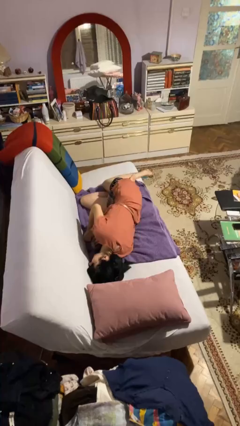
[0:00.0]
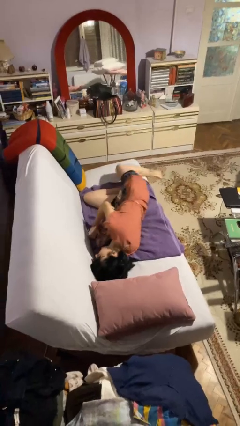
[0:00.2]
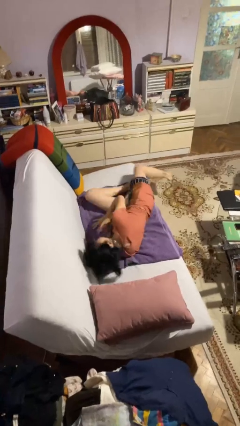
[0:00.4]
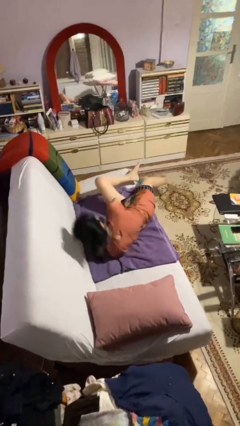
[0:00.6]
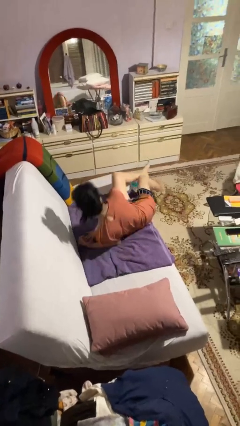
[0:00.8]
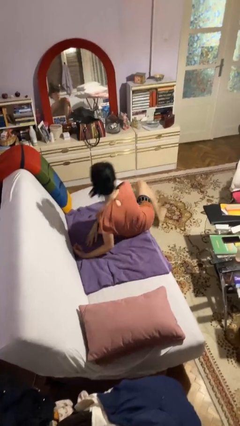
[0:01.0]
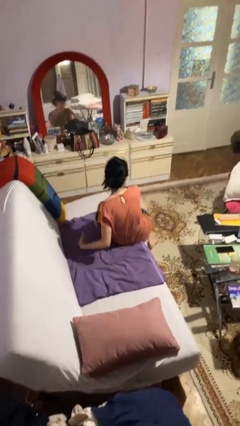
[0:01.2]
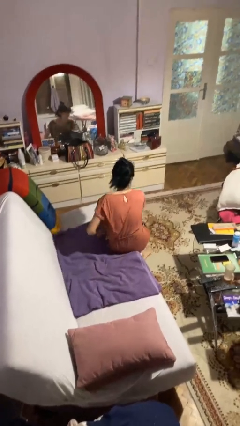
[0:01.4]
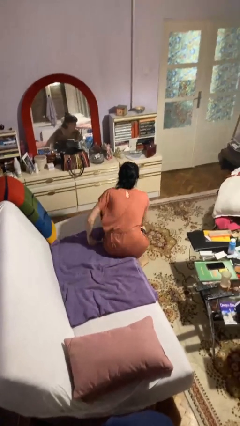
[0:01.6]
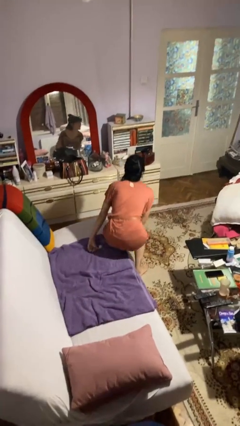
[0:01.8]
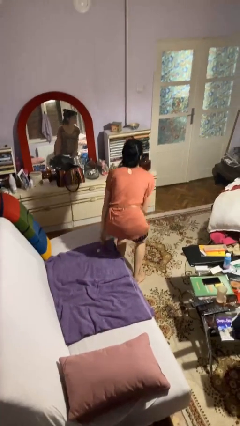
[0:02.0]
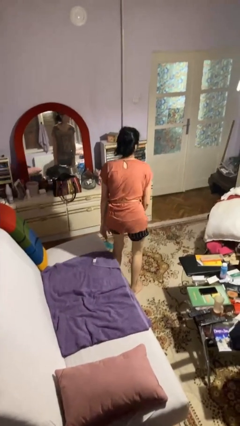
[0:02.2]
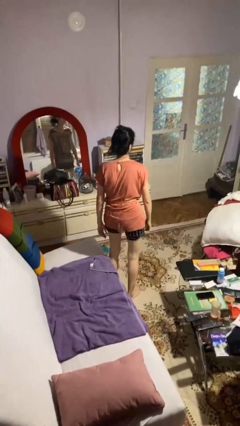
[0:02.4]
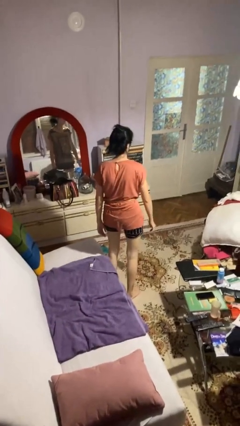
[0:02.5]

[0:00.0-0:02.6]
person stands up

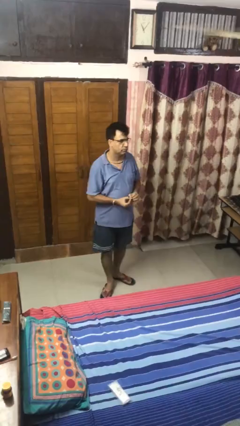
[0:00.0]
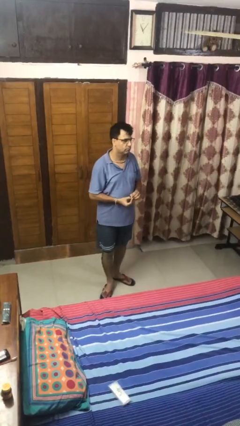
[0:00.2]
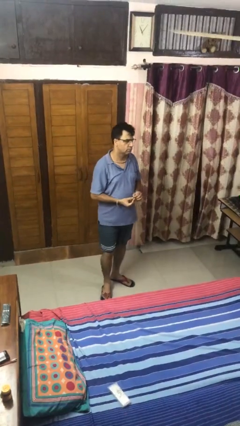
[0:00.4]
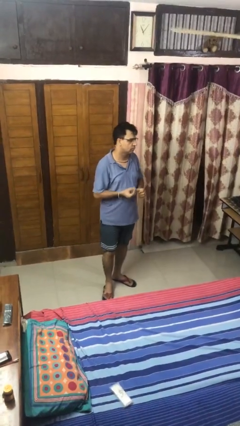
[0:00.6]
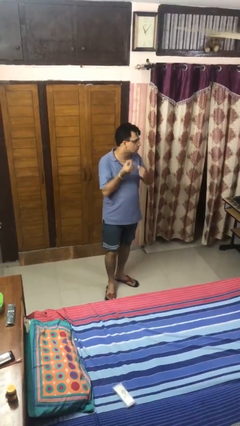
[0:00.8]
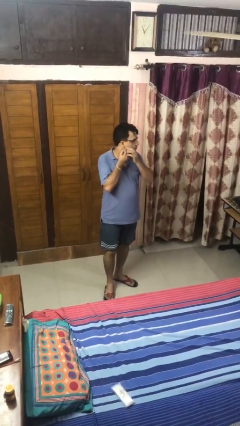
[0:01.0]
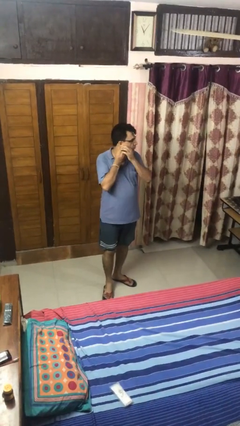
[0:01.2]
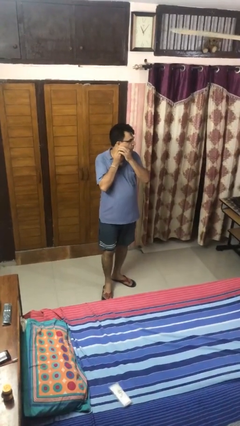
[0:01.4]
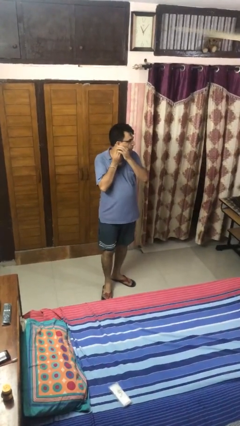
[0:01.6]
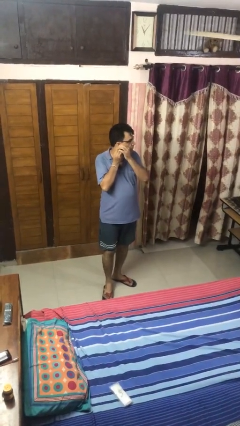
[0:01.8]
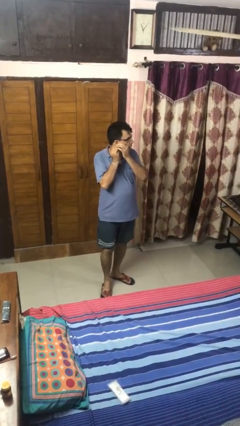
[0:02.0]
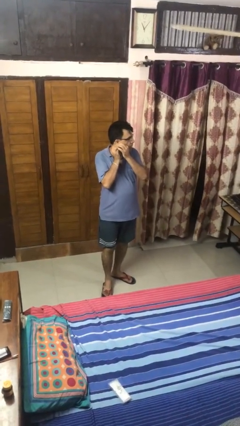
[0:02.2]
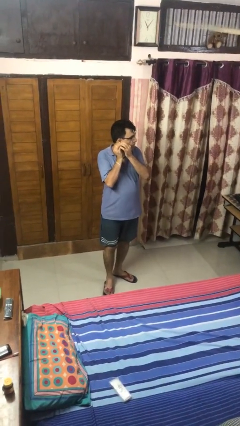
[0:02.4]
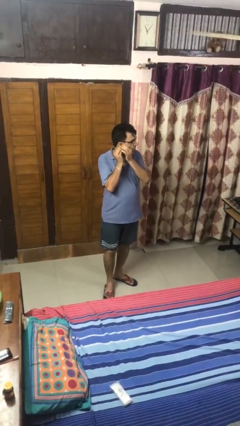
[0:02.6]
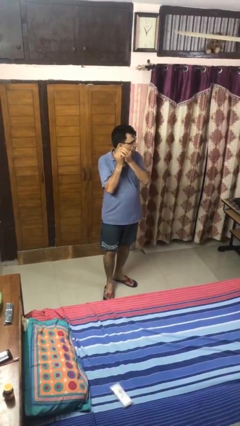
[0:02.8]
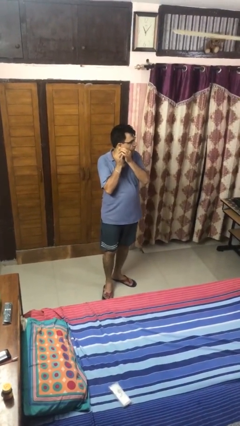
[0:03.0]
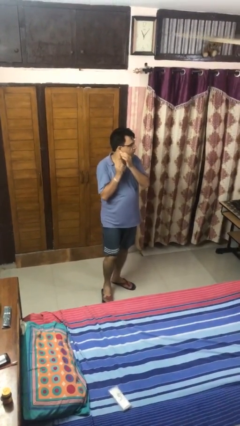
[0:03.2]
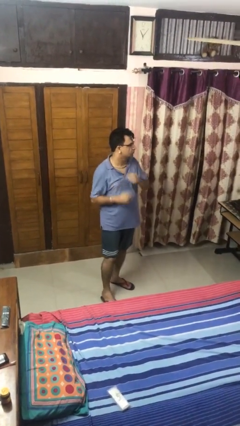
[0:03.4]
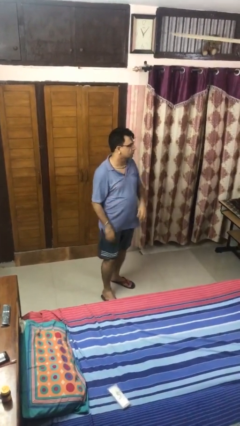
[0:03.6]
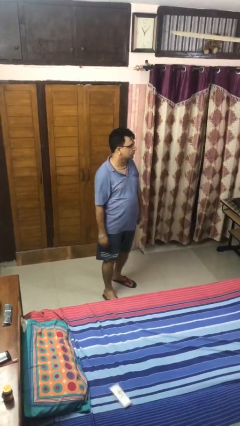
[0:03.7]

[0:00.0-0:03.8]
person puts on earrings

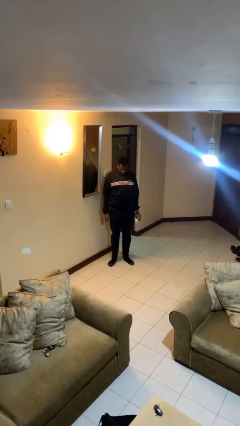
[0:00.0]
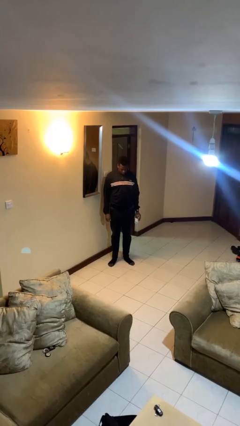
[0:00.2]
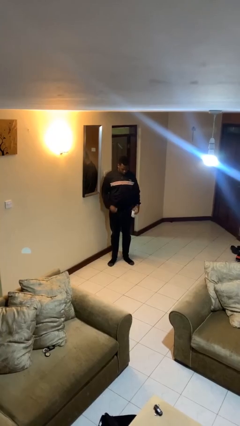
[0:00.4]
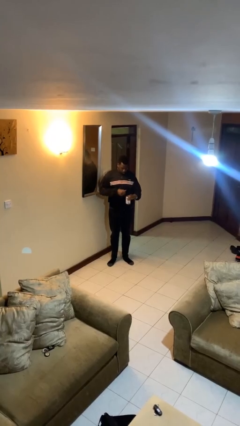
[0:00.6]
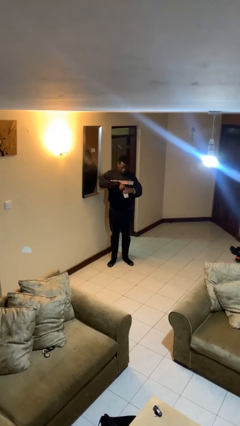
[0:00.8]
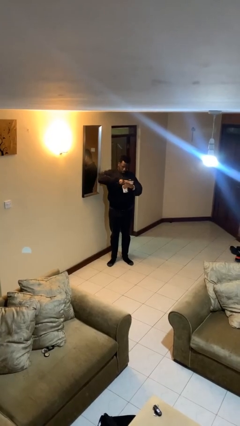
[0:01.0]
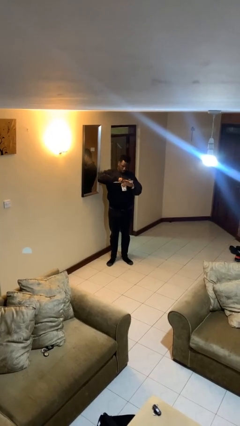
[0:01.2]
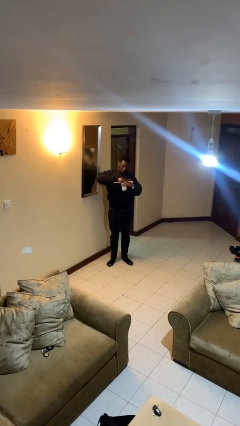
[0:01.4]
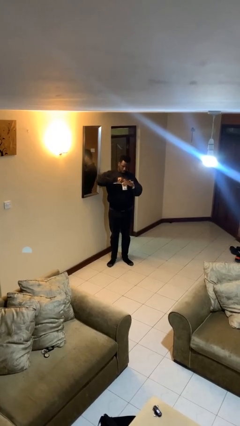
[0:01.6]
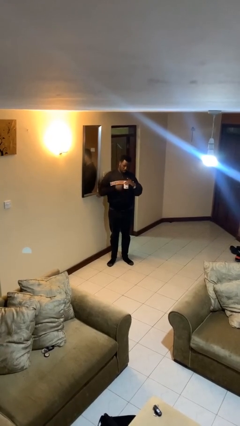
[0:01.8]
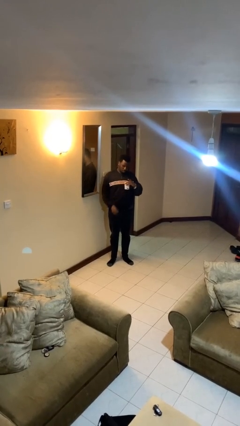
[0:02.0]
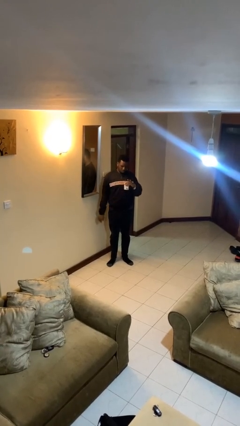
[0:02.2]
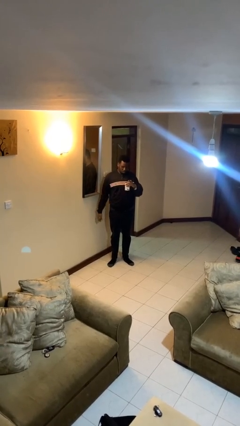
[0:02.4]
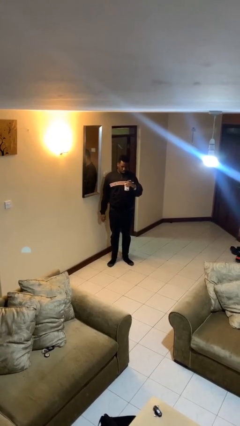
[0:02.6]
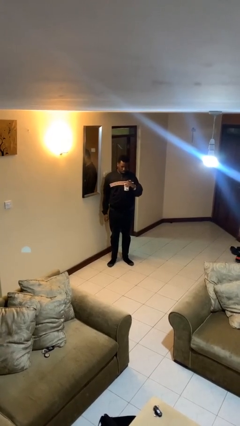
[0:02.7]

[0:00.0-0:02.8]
person opens beverage can

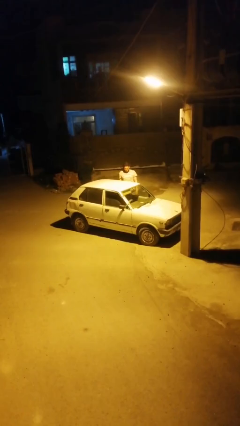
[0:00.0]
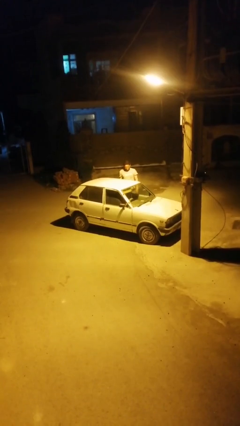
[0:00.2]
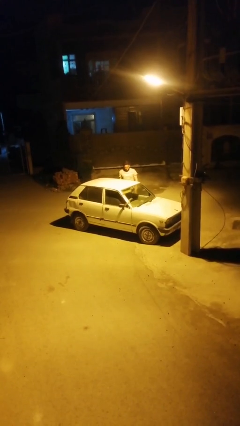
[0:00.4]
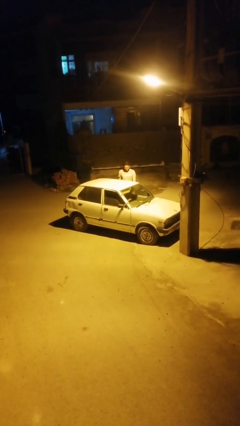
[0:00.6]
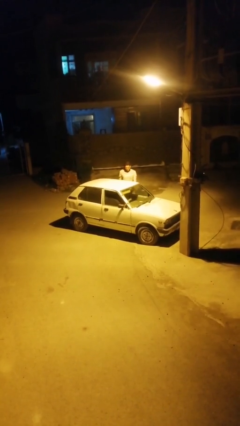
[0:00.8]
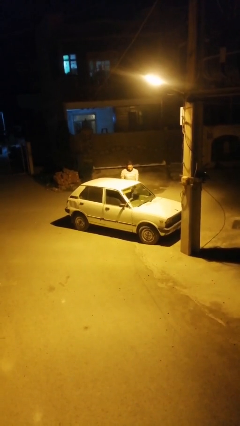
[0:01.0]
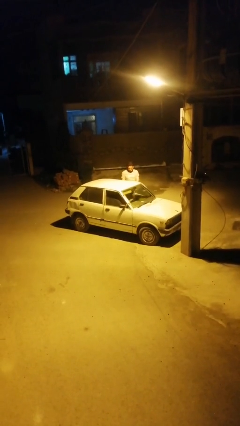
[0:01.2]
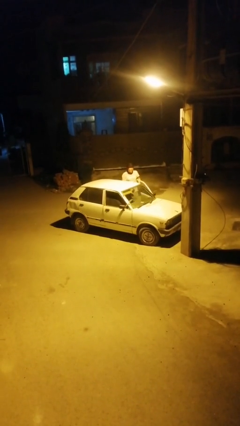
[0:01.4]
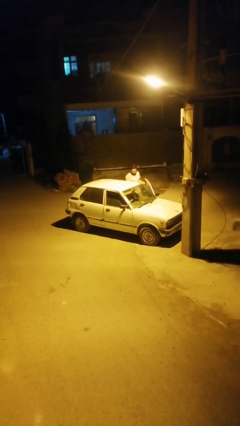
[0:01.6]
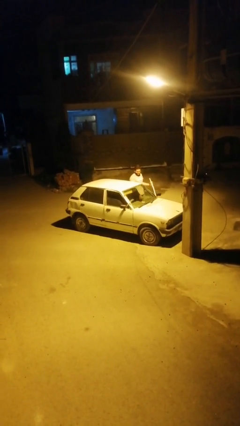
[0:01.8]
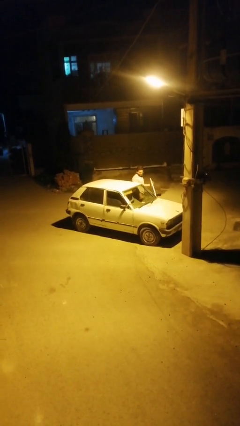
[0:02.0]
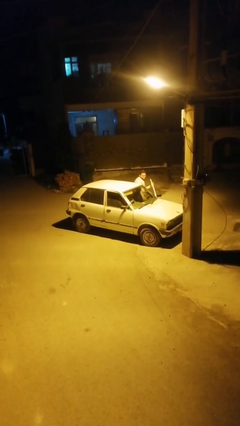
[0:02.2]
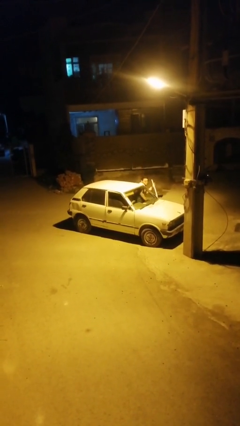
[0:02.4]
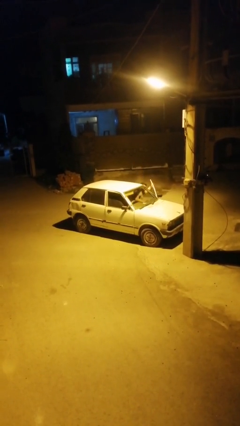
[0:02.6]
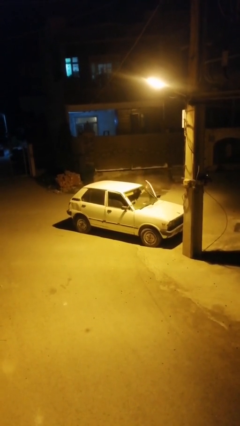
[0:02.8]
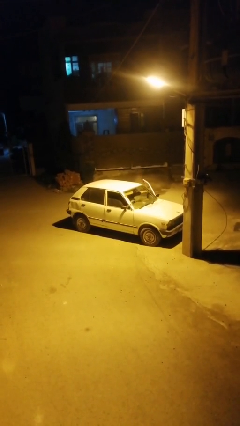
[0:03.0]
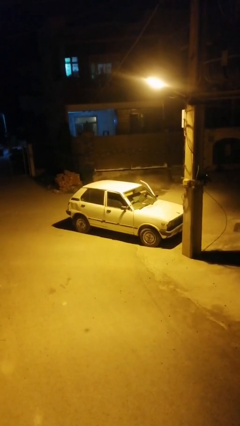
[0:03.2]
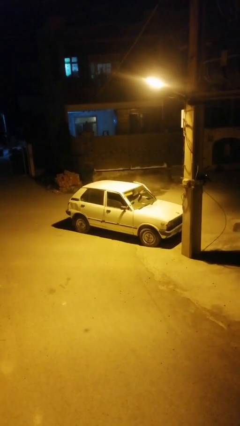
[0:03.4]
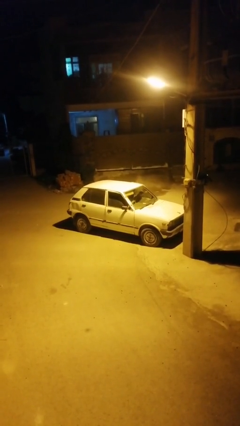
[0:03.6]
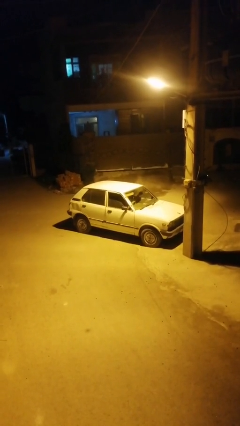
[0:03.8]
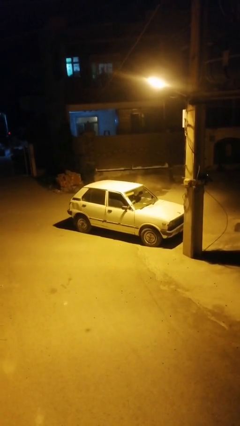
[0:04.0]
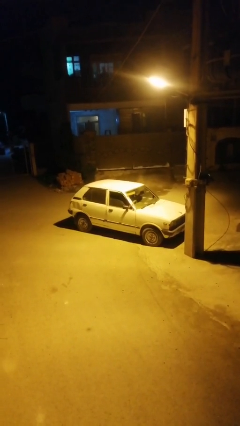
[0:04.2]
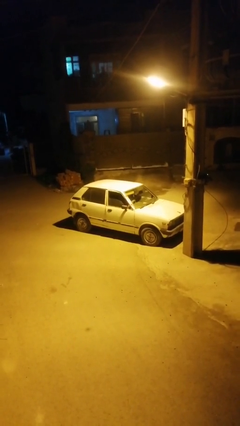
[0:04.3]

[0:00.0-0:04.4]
car picks up person

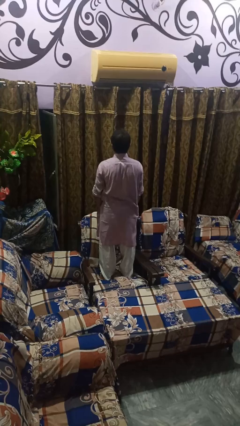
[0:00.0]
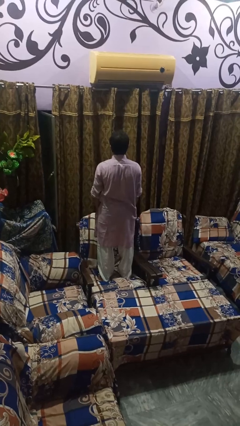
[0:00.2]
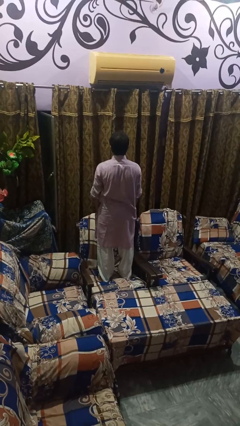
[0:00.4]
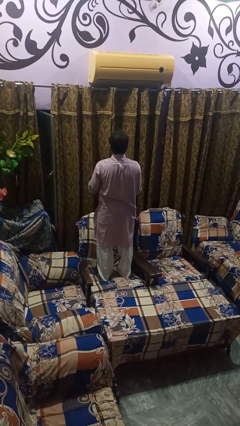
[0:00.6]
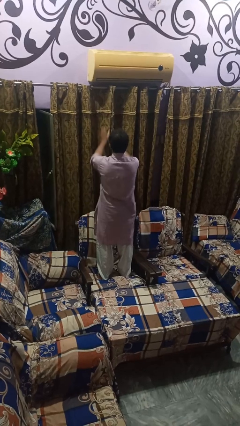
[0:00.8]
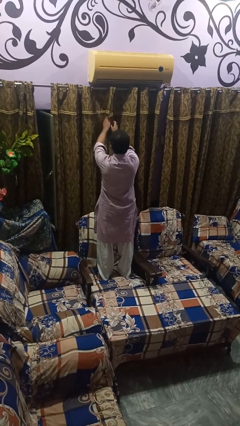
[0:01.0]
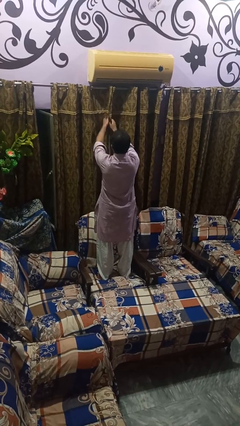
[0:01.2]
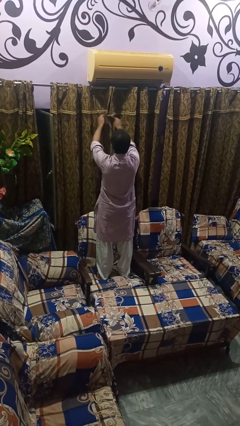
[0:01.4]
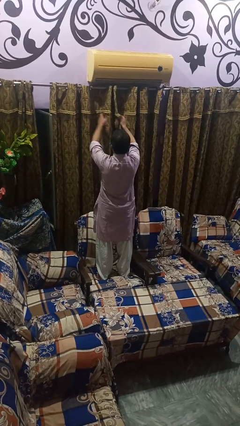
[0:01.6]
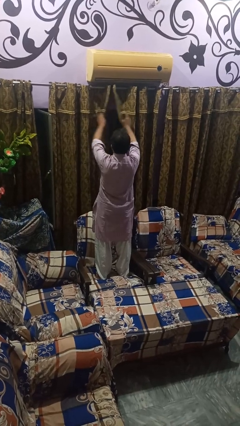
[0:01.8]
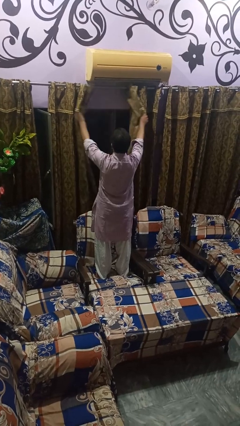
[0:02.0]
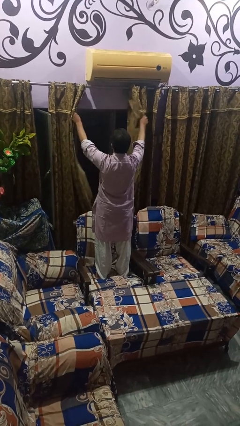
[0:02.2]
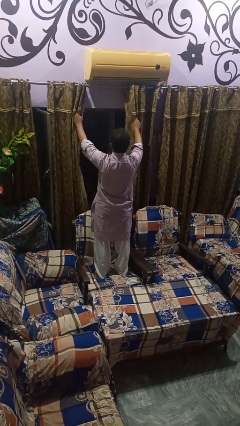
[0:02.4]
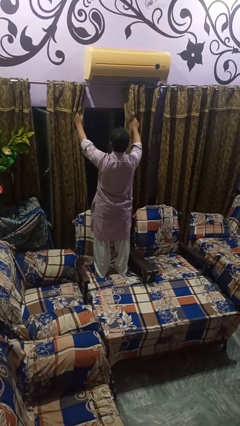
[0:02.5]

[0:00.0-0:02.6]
person opens curtains

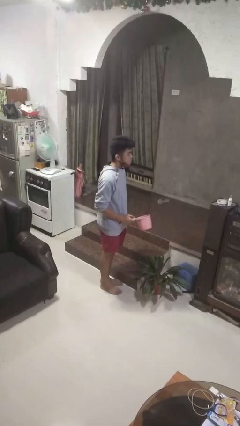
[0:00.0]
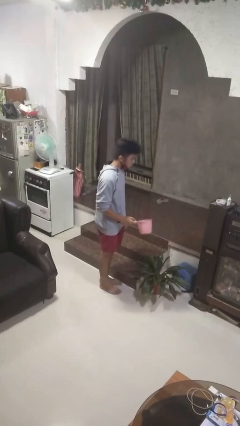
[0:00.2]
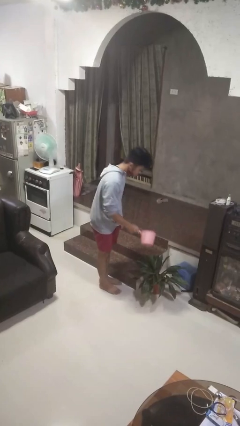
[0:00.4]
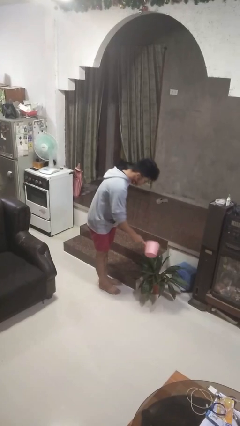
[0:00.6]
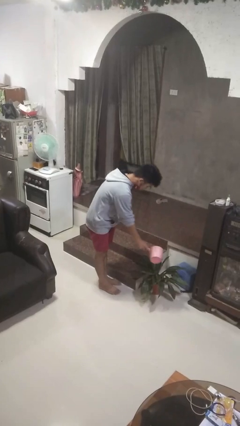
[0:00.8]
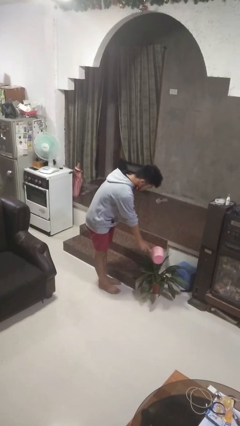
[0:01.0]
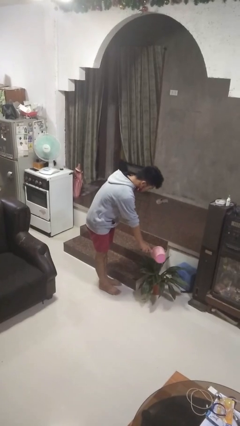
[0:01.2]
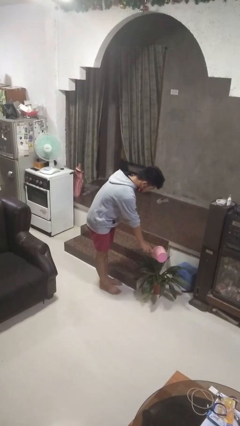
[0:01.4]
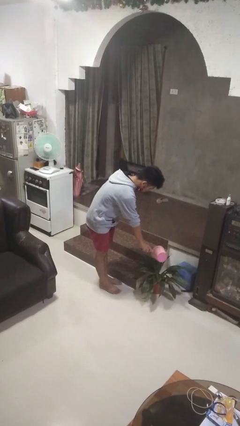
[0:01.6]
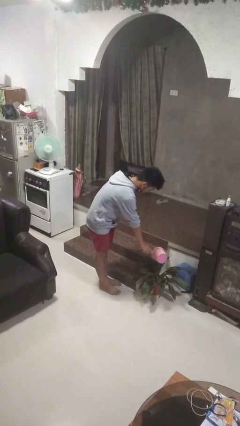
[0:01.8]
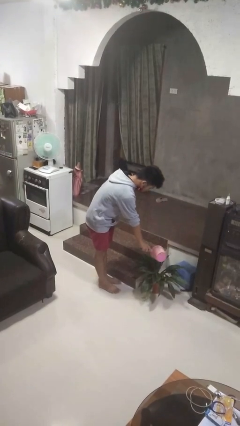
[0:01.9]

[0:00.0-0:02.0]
person waters houseplant
